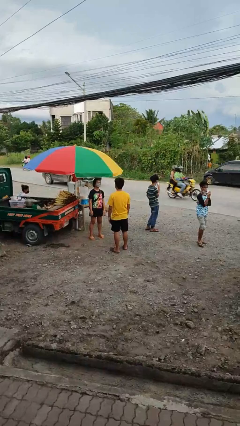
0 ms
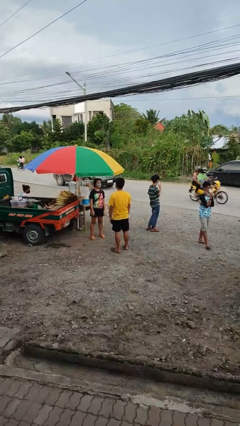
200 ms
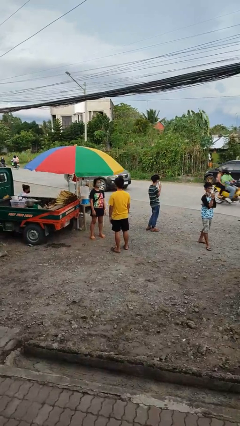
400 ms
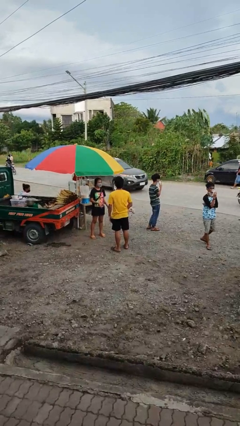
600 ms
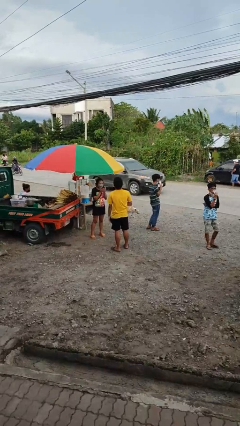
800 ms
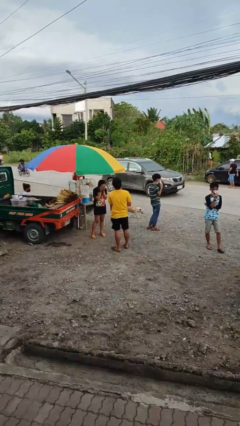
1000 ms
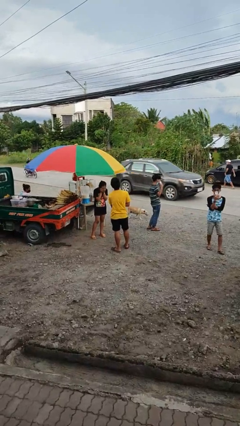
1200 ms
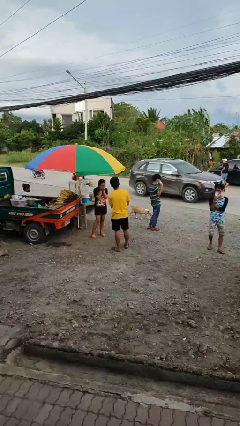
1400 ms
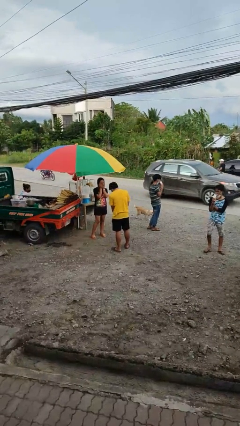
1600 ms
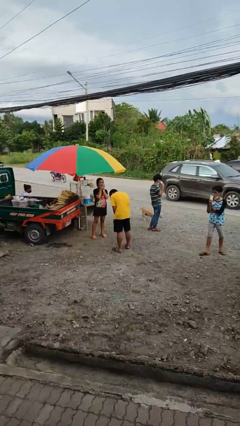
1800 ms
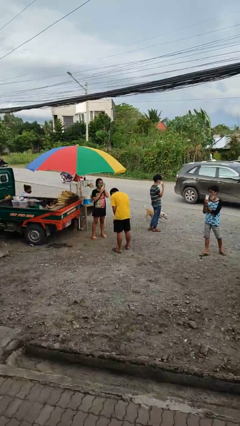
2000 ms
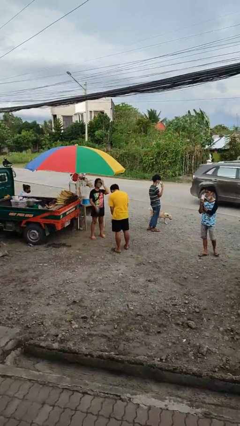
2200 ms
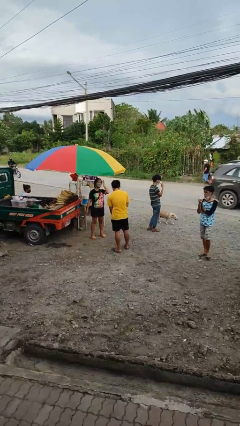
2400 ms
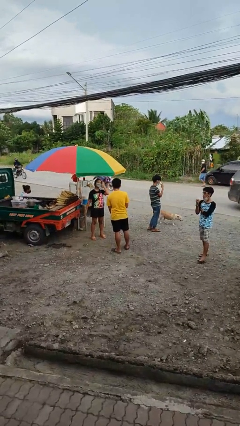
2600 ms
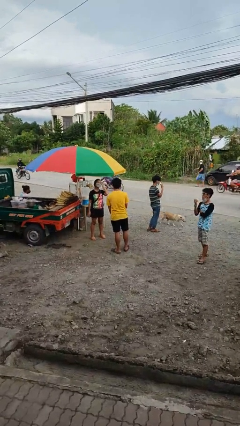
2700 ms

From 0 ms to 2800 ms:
person laughs with person

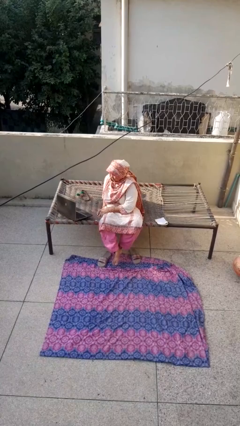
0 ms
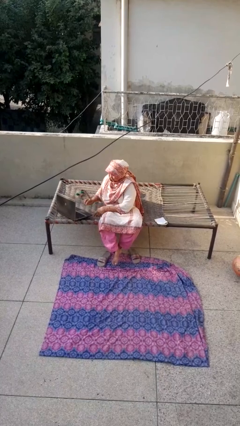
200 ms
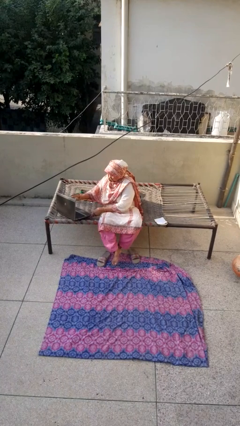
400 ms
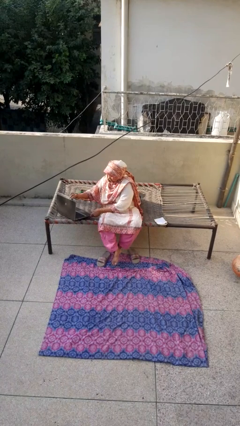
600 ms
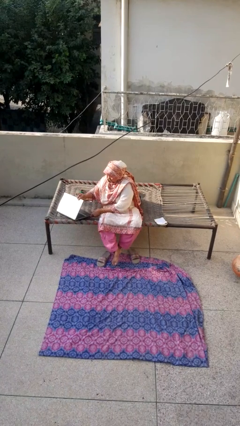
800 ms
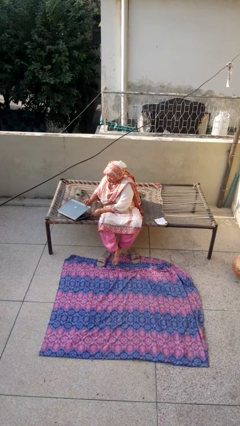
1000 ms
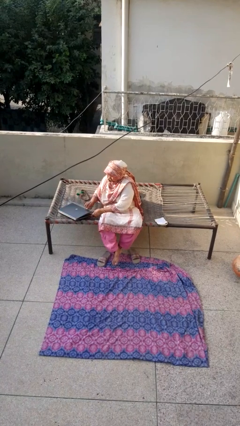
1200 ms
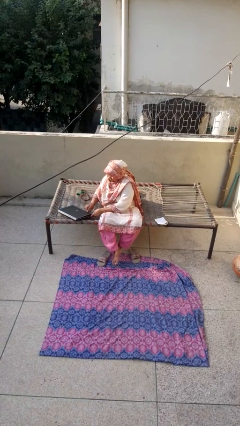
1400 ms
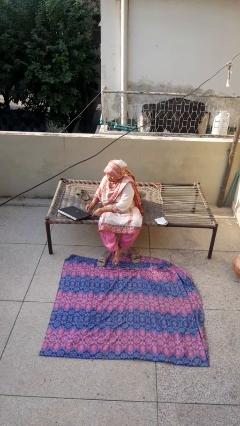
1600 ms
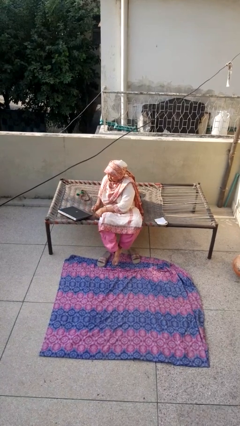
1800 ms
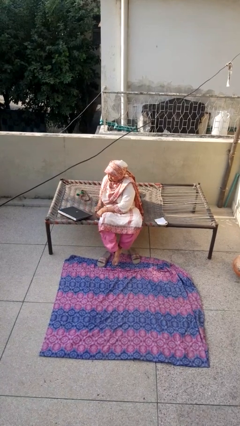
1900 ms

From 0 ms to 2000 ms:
person closes laptop

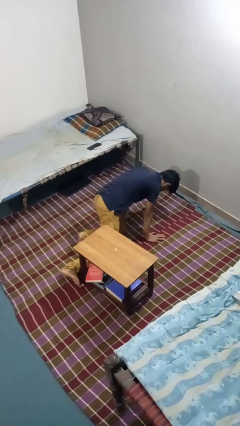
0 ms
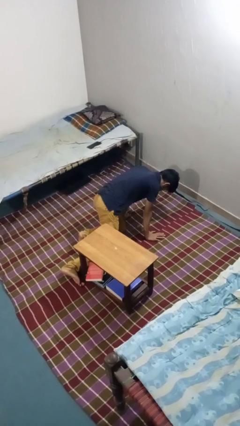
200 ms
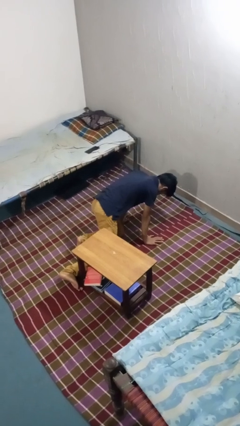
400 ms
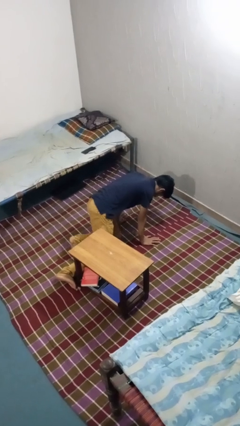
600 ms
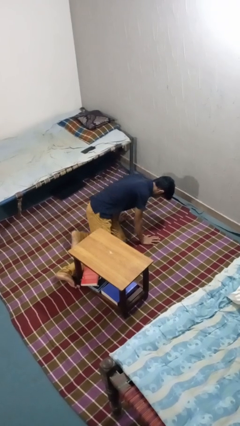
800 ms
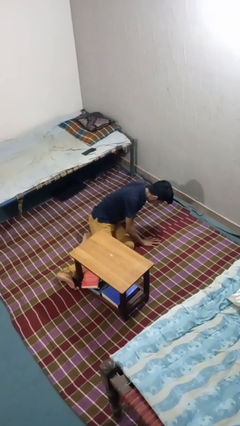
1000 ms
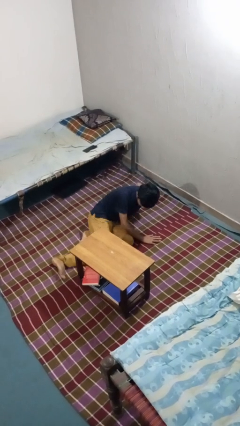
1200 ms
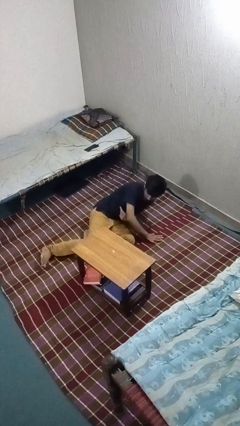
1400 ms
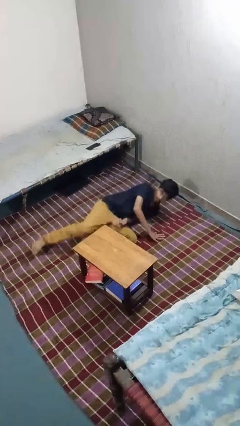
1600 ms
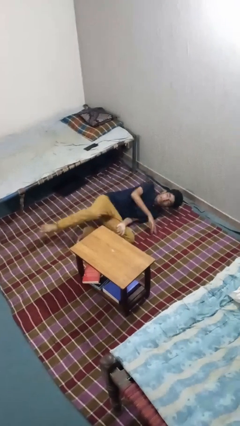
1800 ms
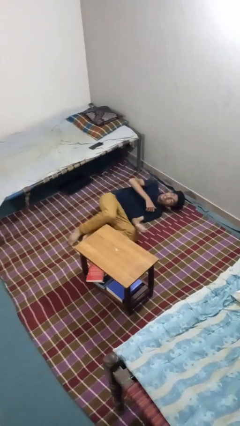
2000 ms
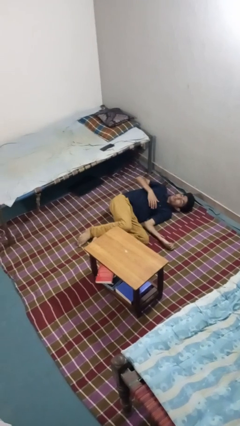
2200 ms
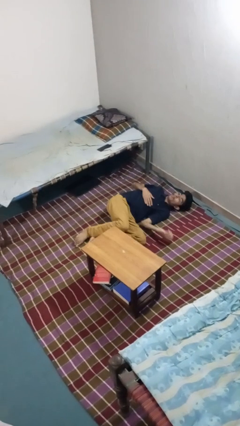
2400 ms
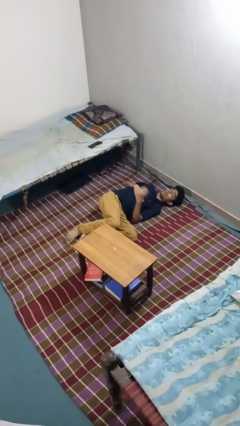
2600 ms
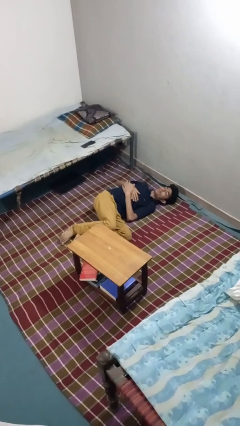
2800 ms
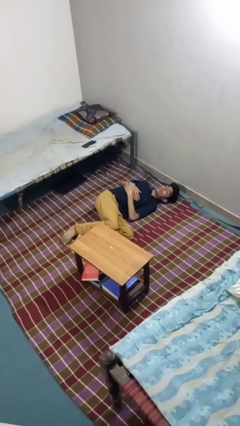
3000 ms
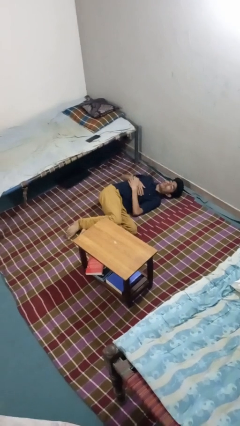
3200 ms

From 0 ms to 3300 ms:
person lies down on floor

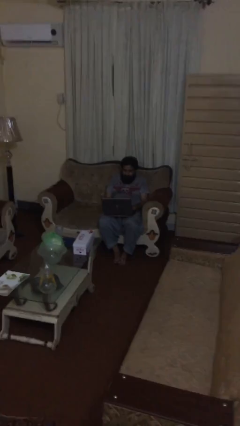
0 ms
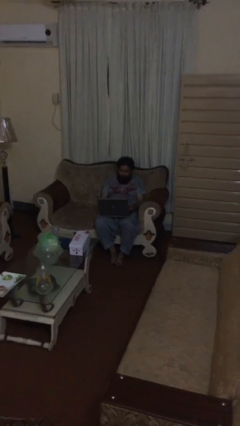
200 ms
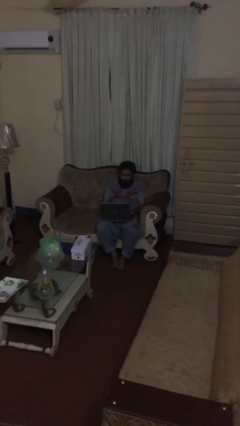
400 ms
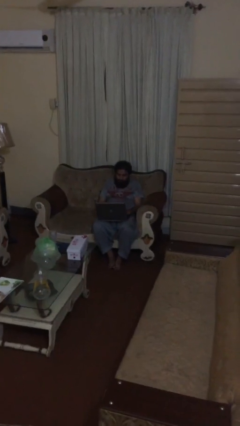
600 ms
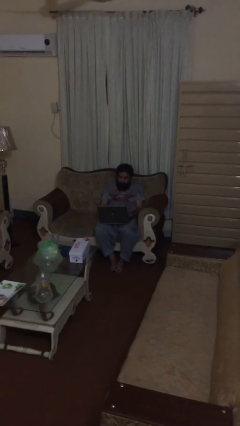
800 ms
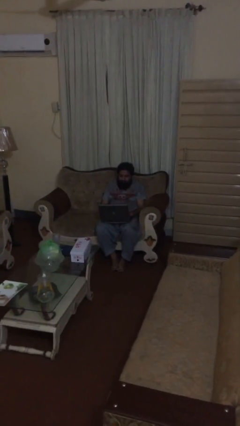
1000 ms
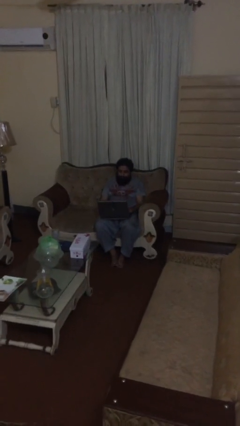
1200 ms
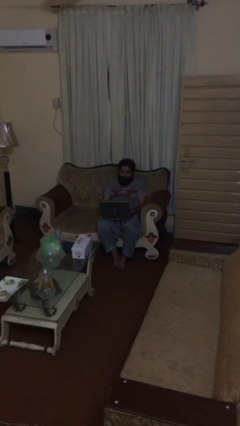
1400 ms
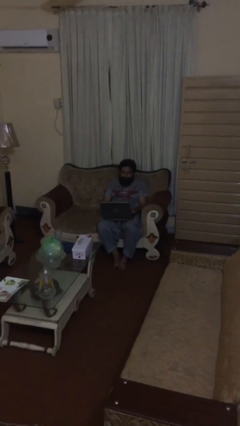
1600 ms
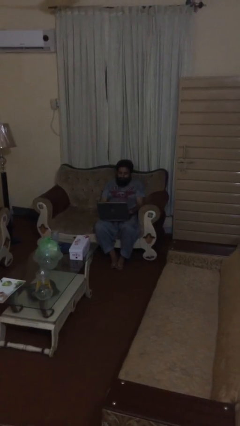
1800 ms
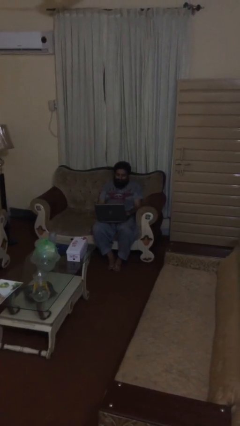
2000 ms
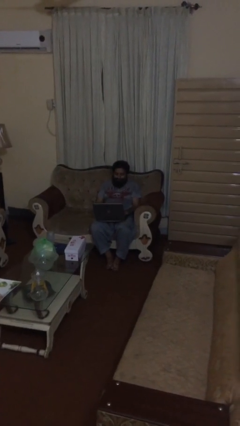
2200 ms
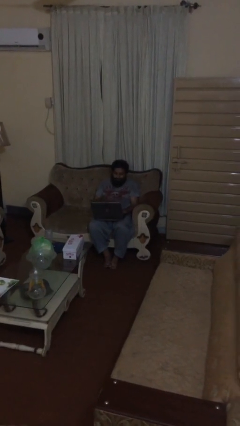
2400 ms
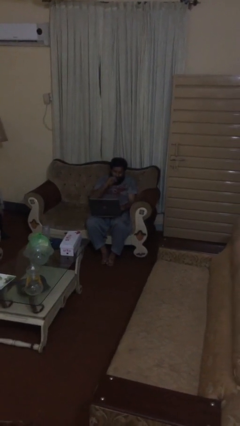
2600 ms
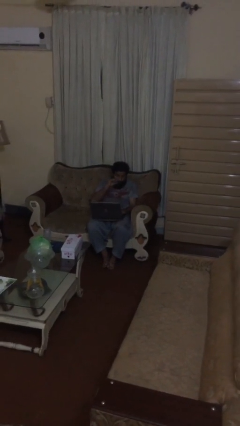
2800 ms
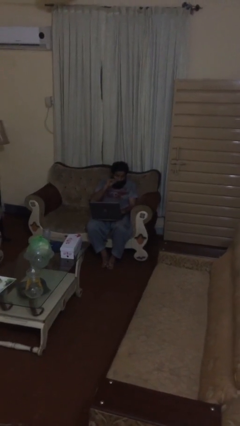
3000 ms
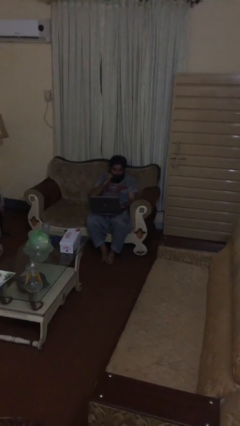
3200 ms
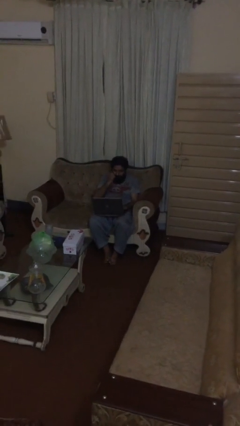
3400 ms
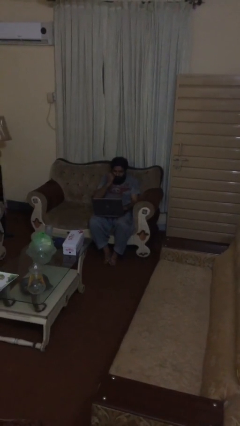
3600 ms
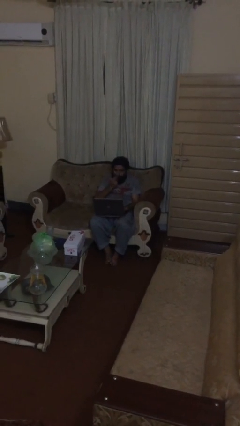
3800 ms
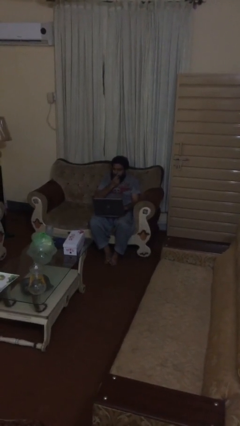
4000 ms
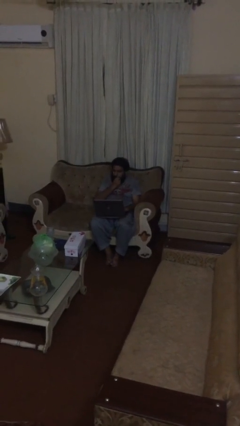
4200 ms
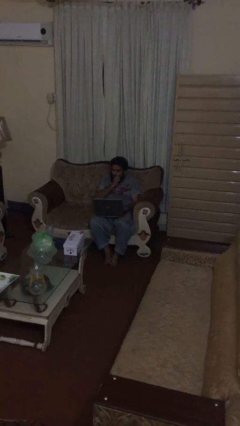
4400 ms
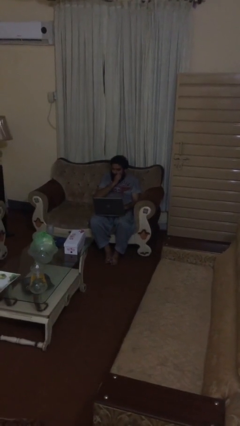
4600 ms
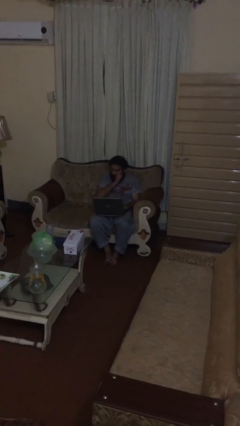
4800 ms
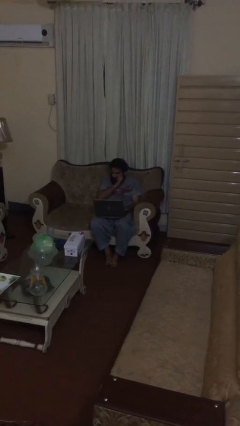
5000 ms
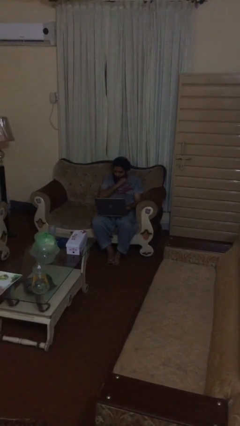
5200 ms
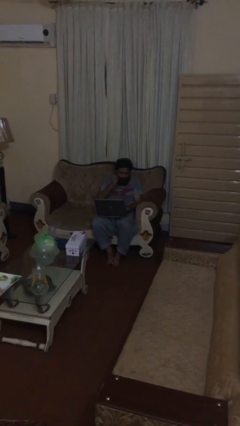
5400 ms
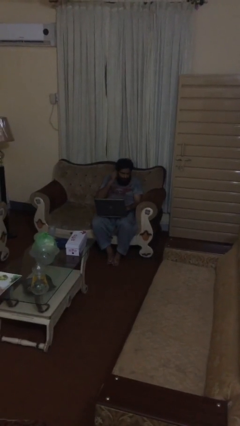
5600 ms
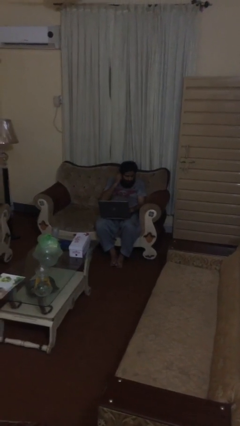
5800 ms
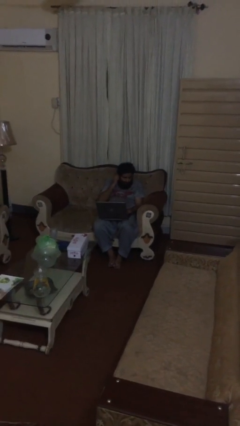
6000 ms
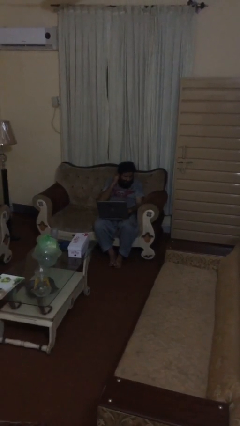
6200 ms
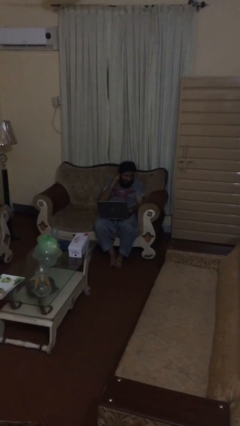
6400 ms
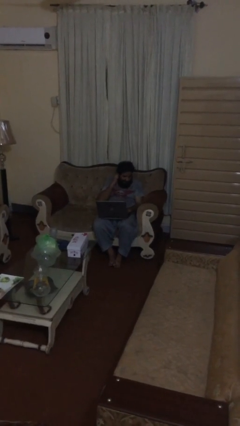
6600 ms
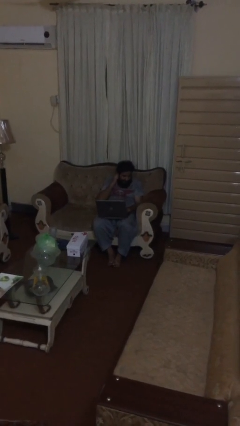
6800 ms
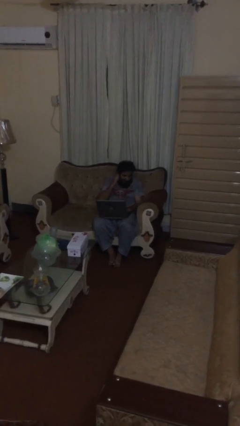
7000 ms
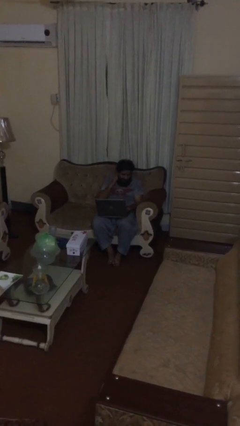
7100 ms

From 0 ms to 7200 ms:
person interacts with laptop

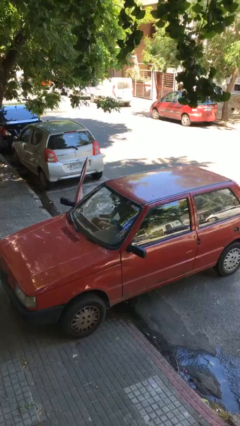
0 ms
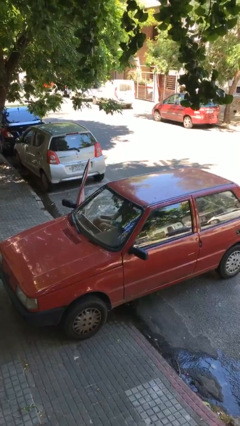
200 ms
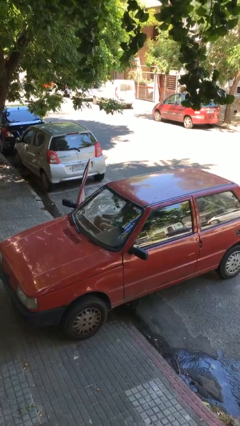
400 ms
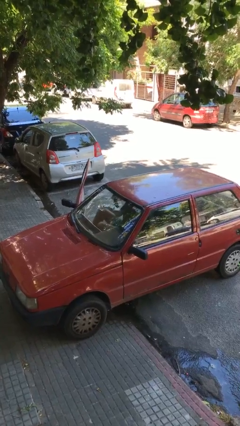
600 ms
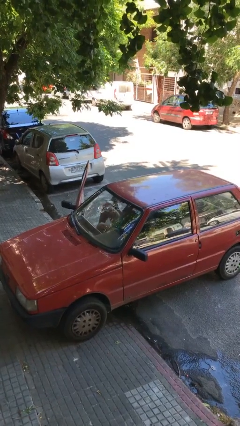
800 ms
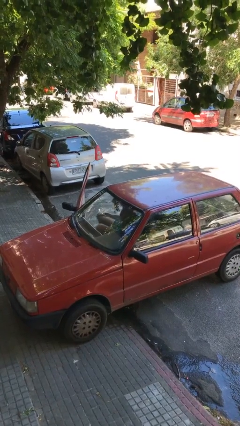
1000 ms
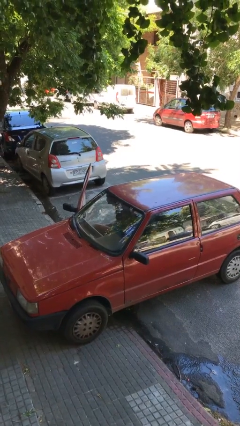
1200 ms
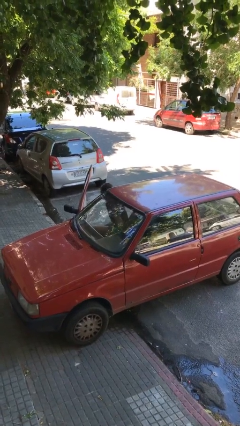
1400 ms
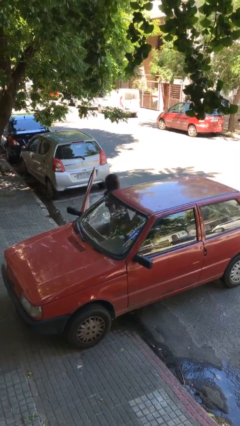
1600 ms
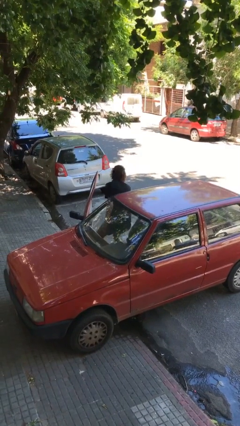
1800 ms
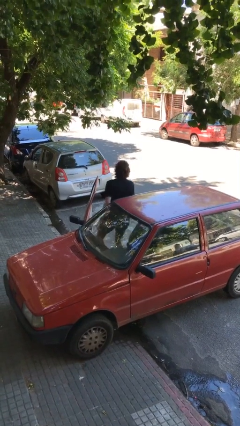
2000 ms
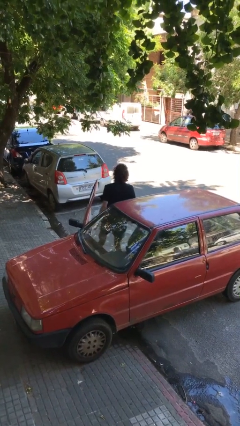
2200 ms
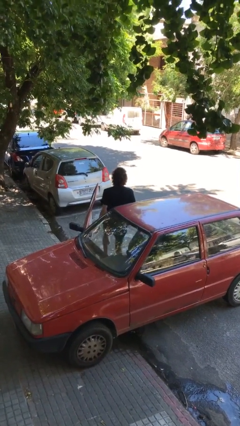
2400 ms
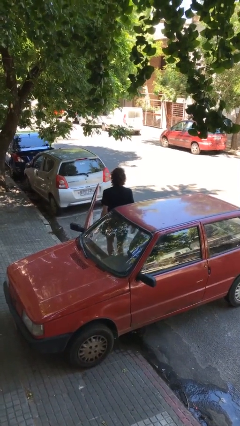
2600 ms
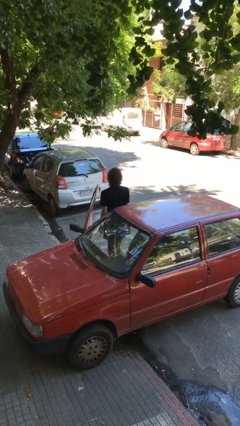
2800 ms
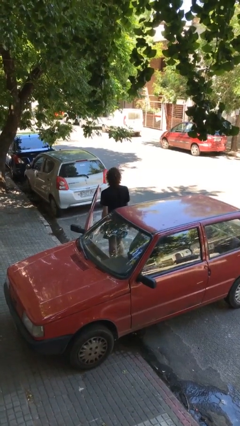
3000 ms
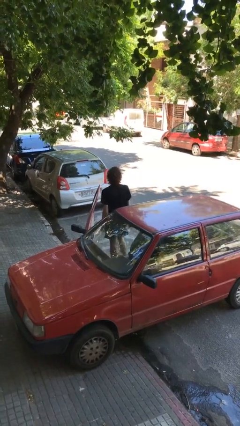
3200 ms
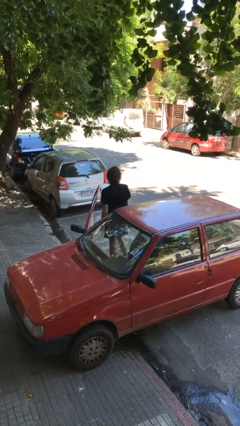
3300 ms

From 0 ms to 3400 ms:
person exits car
